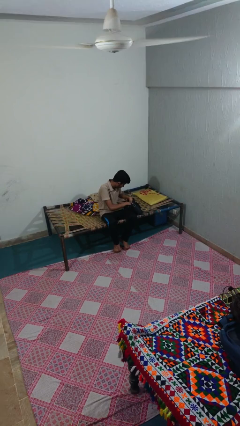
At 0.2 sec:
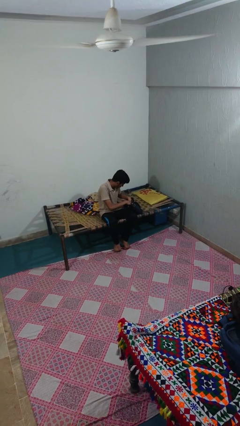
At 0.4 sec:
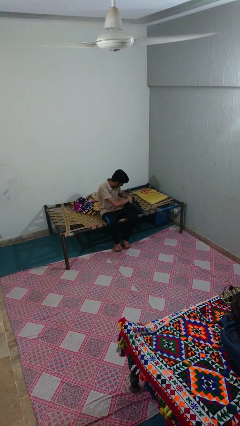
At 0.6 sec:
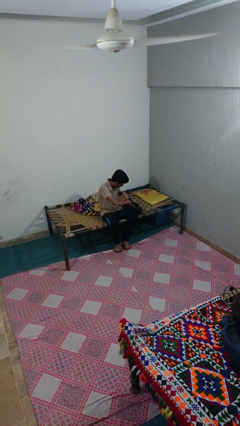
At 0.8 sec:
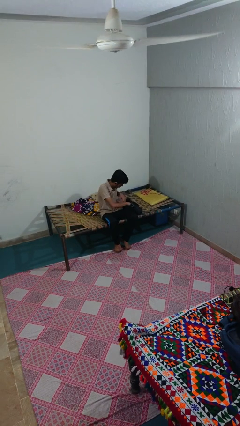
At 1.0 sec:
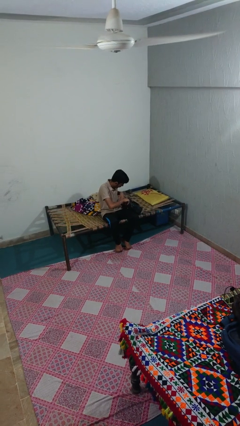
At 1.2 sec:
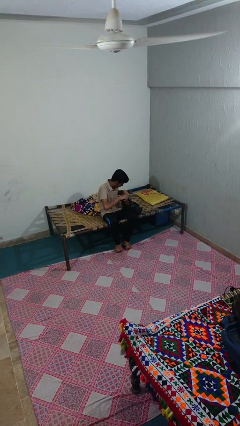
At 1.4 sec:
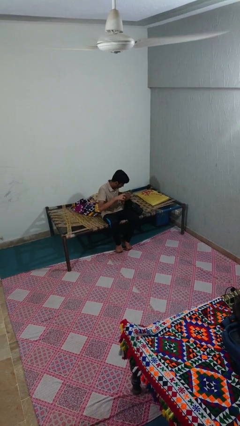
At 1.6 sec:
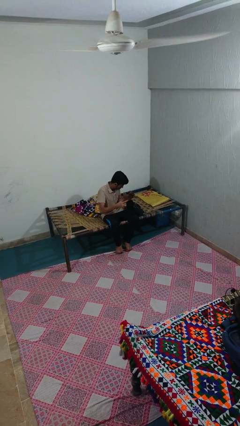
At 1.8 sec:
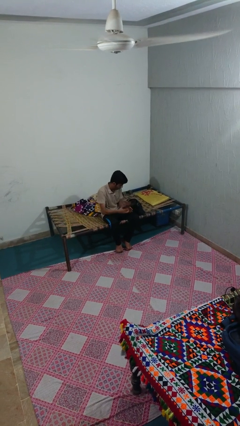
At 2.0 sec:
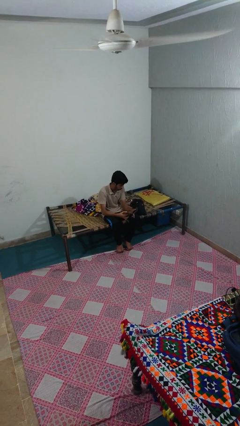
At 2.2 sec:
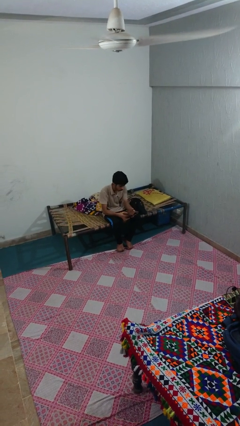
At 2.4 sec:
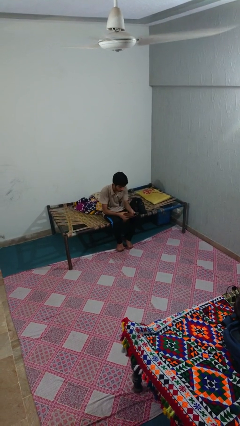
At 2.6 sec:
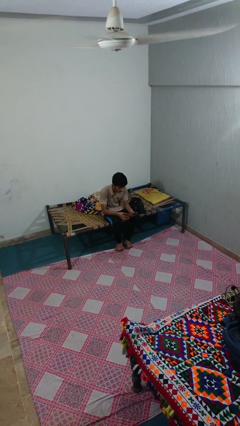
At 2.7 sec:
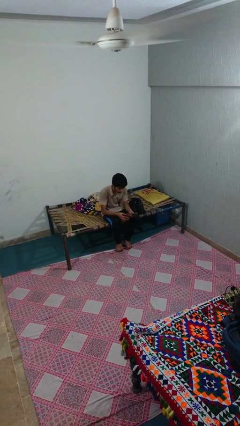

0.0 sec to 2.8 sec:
person takes object from purse

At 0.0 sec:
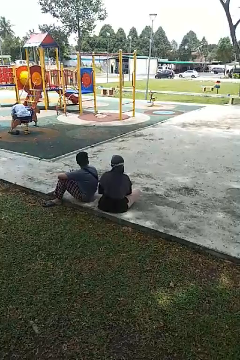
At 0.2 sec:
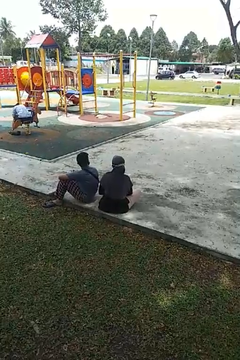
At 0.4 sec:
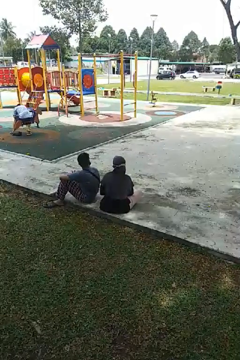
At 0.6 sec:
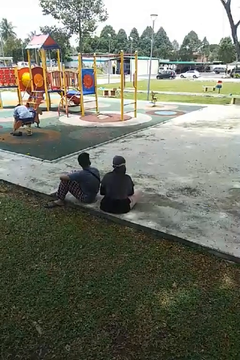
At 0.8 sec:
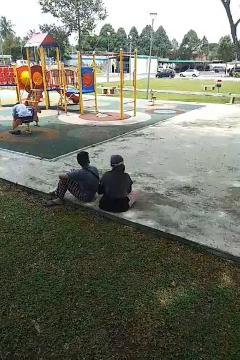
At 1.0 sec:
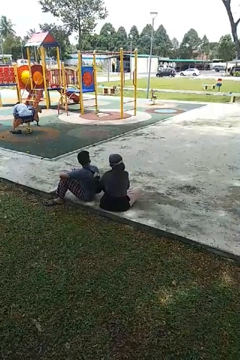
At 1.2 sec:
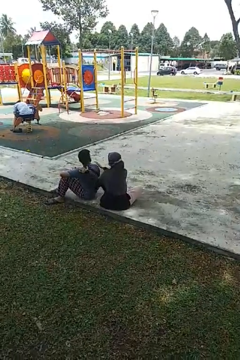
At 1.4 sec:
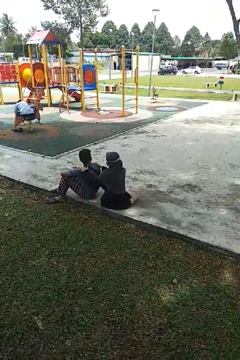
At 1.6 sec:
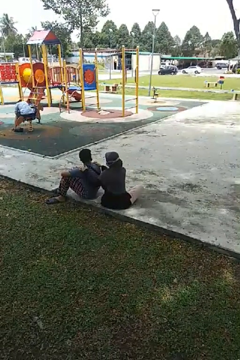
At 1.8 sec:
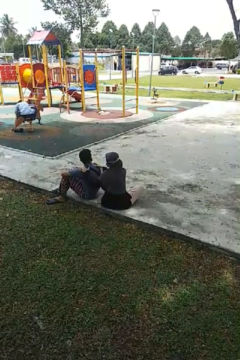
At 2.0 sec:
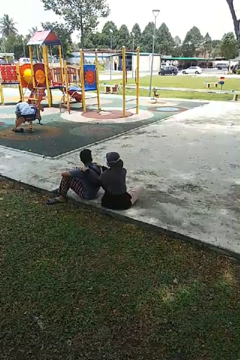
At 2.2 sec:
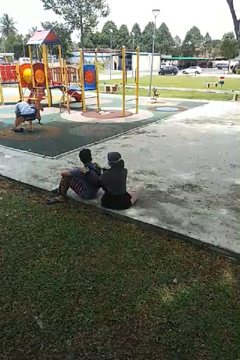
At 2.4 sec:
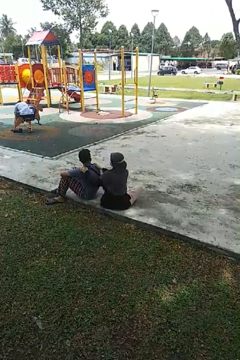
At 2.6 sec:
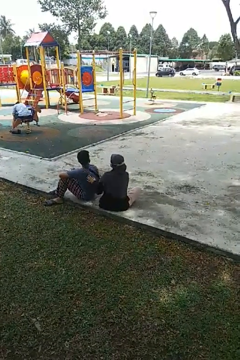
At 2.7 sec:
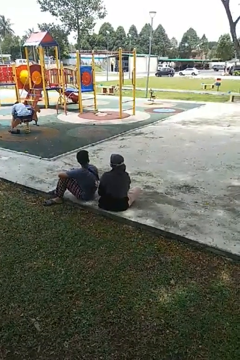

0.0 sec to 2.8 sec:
person pounds shoulders of person

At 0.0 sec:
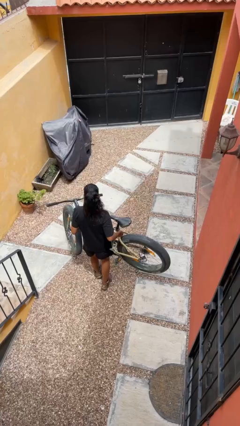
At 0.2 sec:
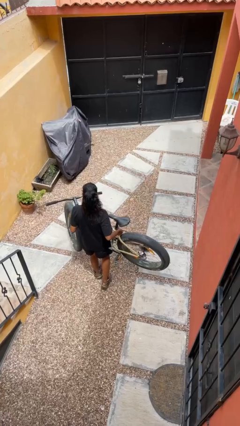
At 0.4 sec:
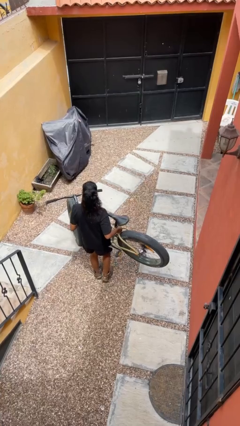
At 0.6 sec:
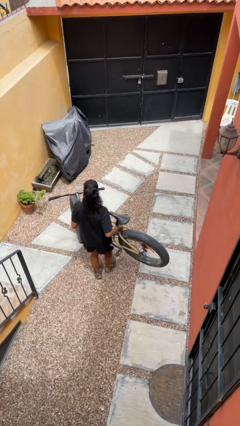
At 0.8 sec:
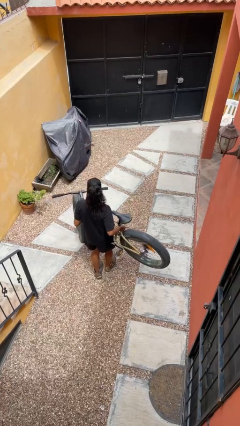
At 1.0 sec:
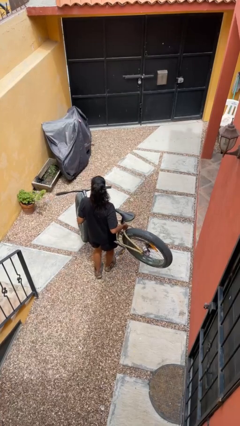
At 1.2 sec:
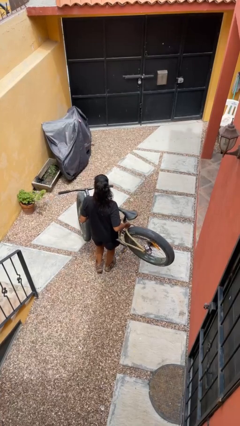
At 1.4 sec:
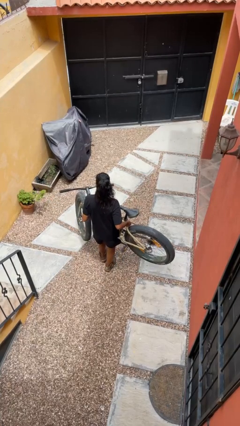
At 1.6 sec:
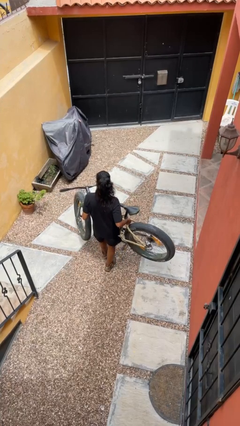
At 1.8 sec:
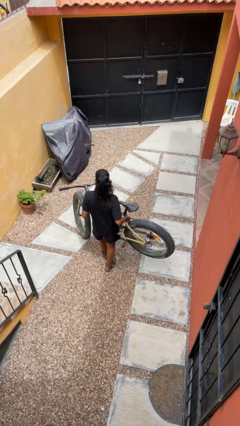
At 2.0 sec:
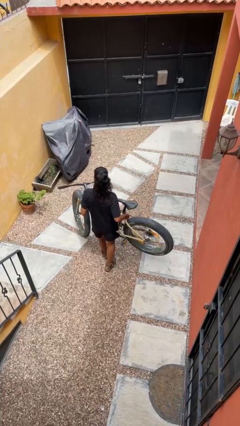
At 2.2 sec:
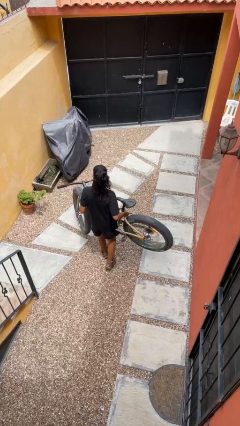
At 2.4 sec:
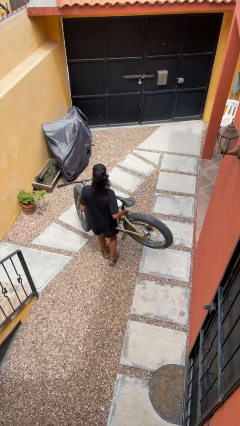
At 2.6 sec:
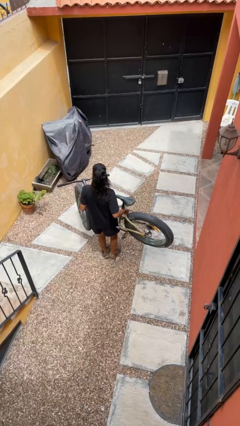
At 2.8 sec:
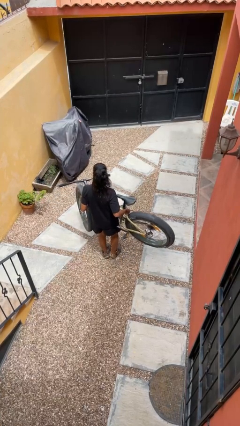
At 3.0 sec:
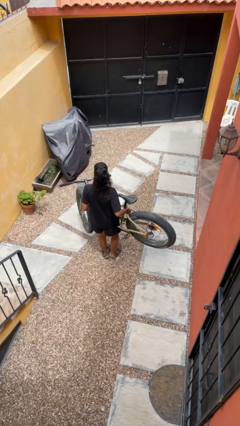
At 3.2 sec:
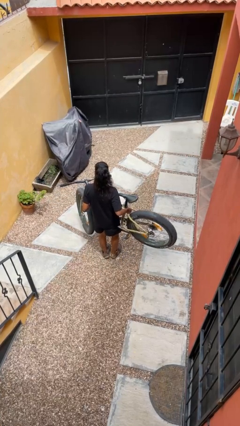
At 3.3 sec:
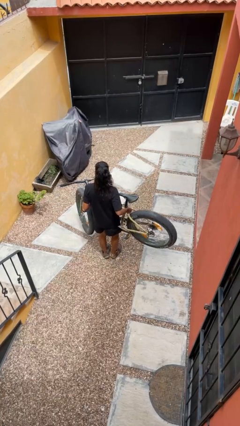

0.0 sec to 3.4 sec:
person carries bicycle

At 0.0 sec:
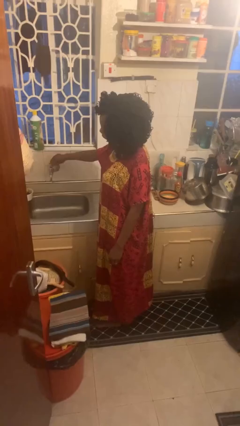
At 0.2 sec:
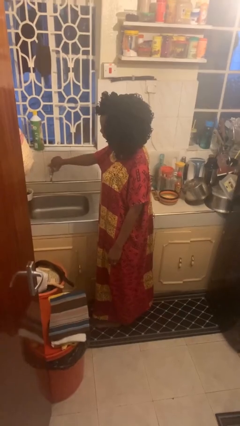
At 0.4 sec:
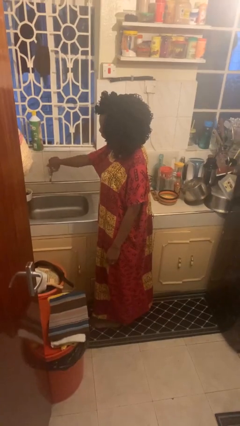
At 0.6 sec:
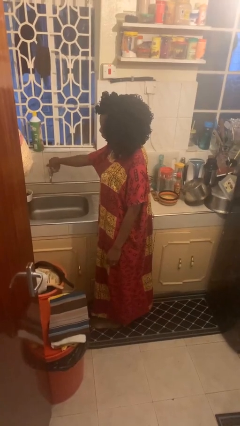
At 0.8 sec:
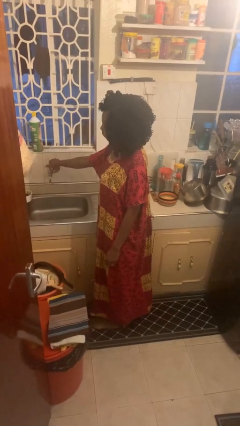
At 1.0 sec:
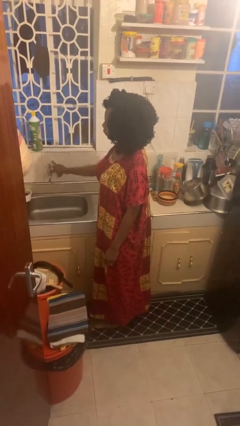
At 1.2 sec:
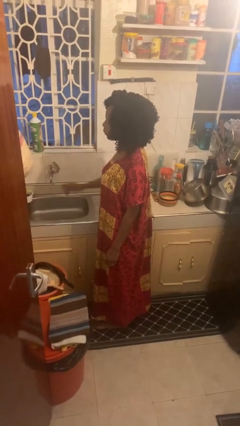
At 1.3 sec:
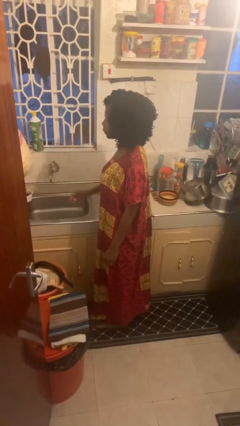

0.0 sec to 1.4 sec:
person turns off faucet

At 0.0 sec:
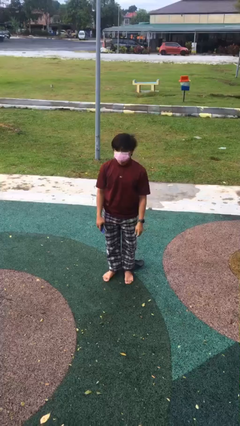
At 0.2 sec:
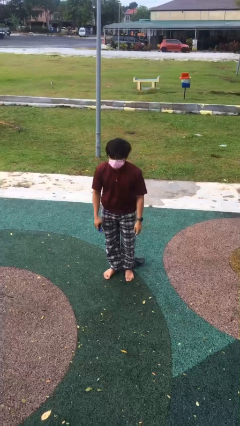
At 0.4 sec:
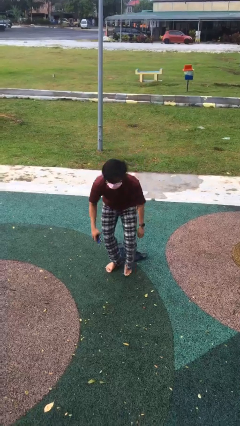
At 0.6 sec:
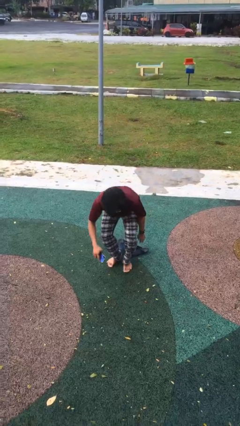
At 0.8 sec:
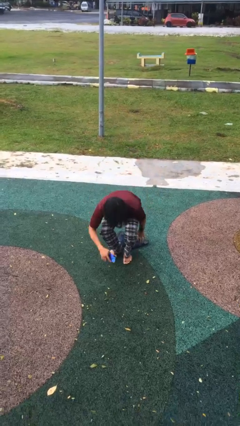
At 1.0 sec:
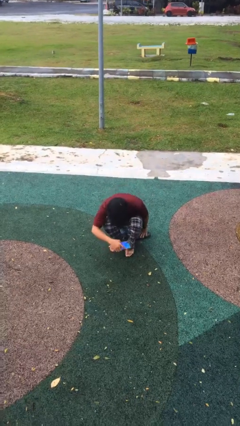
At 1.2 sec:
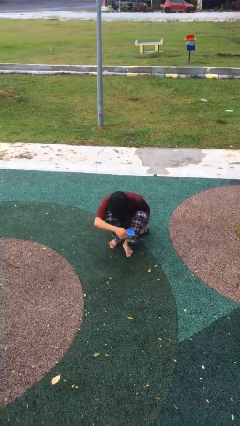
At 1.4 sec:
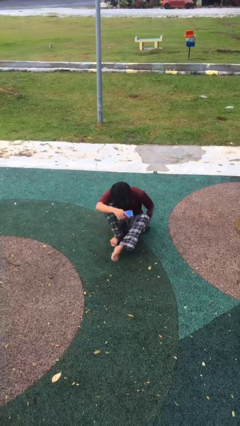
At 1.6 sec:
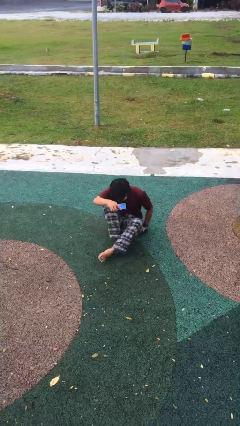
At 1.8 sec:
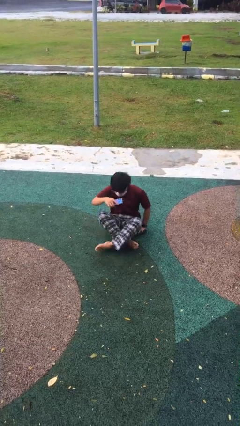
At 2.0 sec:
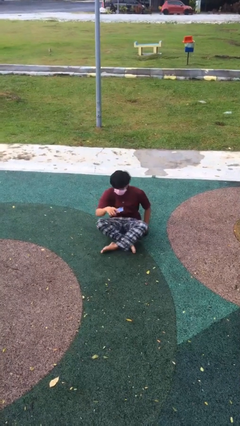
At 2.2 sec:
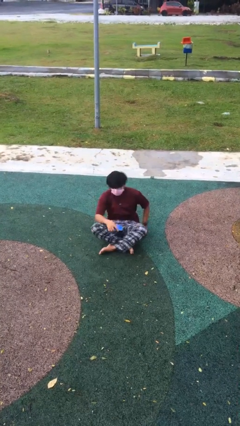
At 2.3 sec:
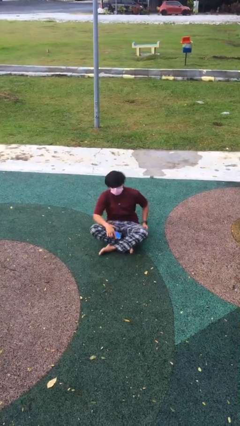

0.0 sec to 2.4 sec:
person sits crisscross

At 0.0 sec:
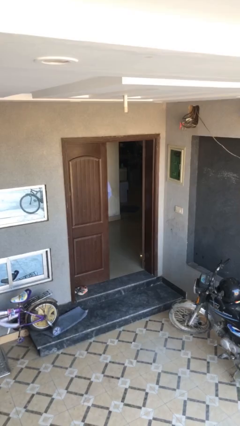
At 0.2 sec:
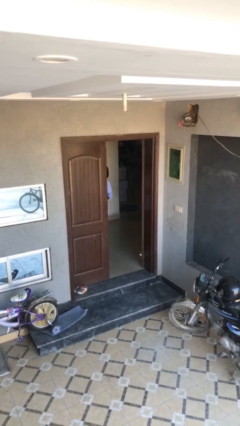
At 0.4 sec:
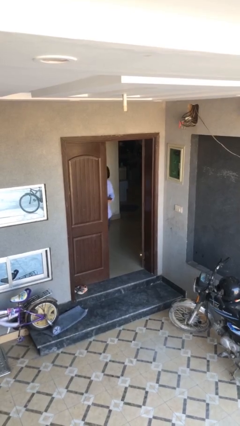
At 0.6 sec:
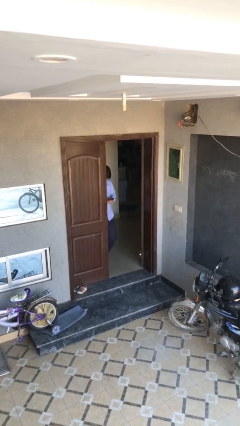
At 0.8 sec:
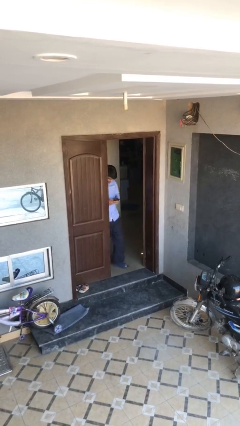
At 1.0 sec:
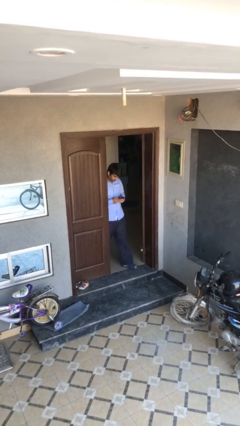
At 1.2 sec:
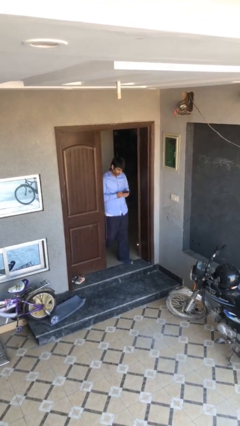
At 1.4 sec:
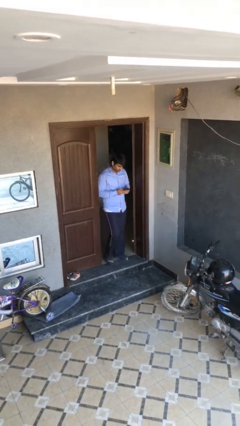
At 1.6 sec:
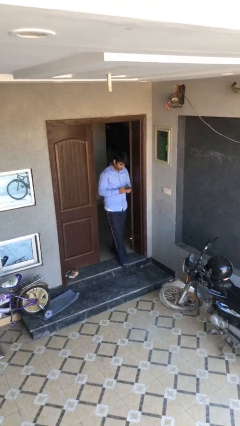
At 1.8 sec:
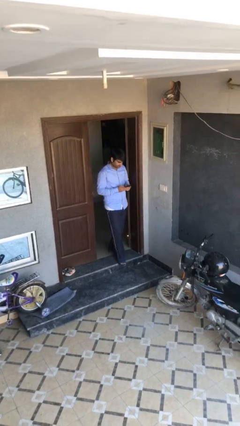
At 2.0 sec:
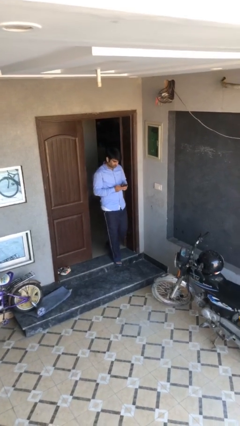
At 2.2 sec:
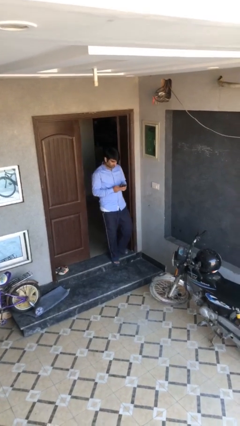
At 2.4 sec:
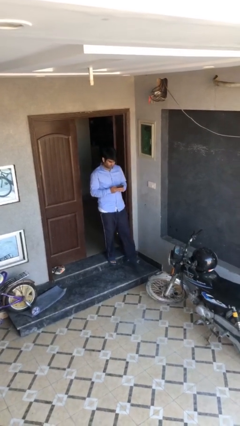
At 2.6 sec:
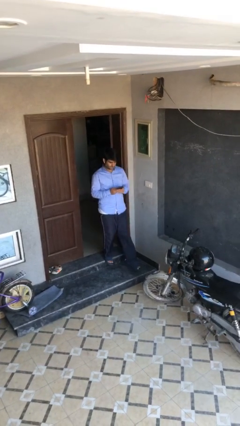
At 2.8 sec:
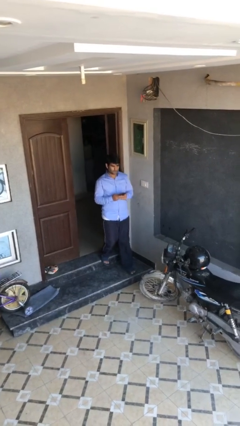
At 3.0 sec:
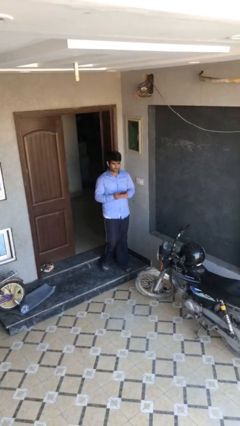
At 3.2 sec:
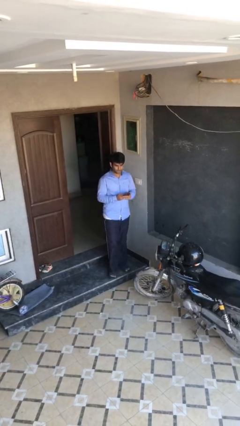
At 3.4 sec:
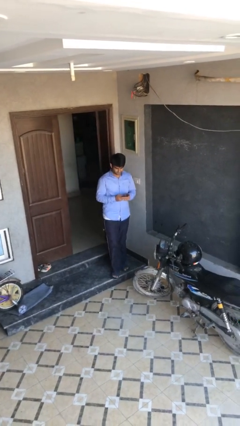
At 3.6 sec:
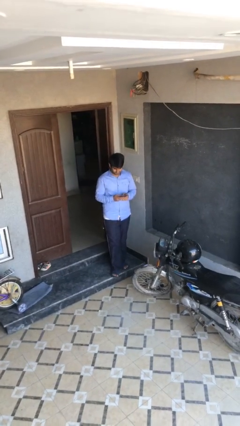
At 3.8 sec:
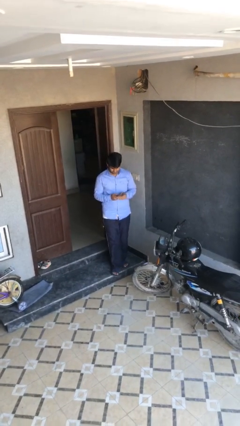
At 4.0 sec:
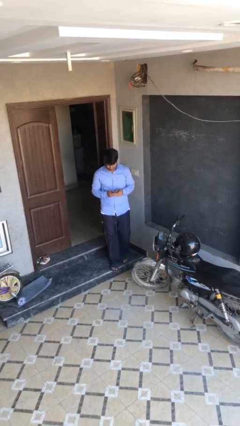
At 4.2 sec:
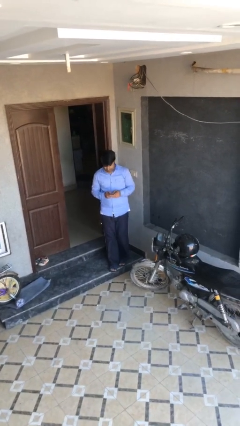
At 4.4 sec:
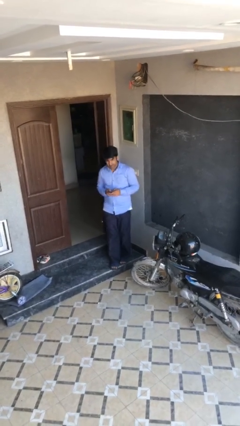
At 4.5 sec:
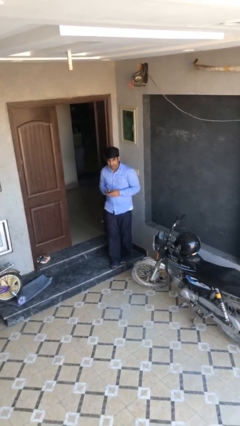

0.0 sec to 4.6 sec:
person enters scene through structure

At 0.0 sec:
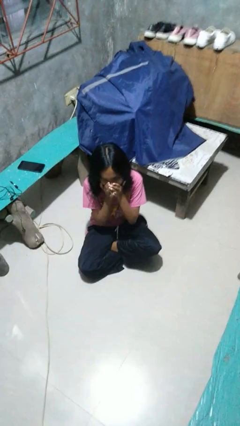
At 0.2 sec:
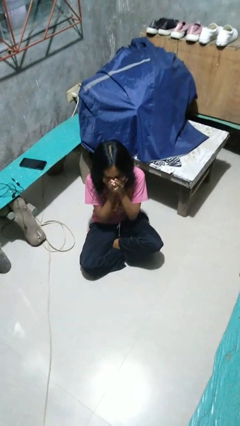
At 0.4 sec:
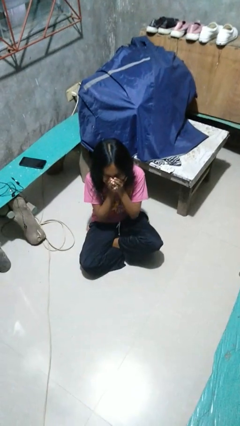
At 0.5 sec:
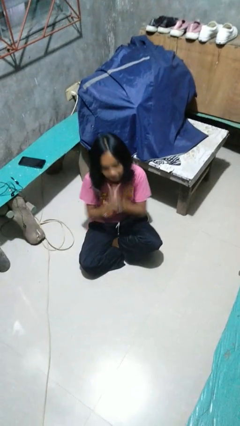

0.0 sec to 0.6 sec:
person yawns
